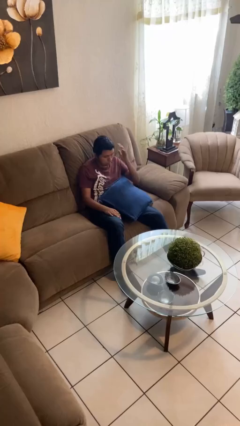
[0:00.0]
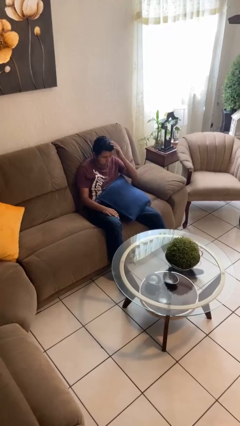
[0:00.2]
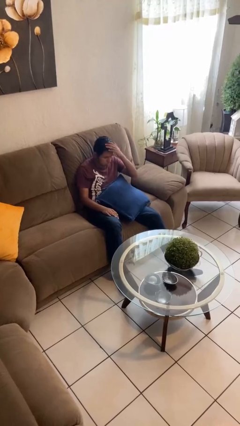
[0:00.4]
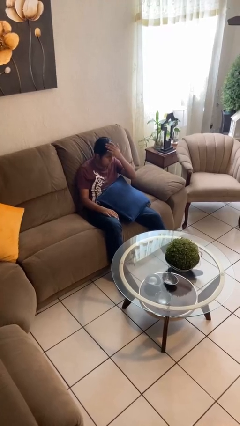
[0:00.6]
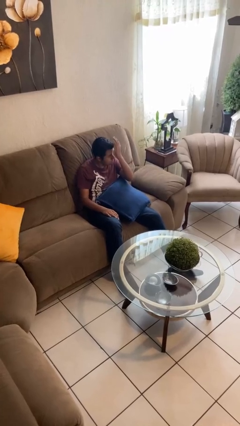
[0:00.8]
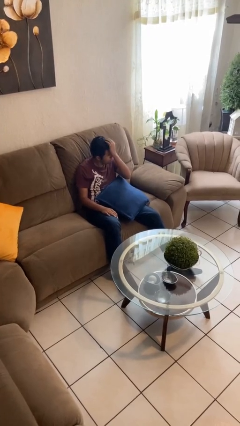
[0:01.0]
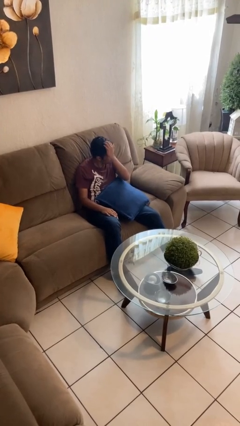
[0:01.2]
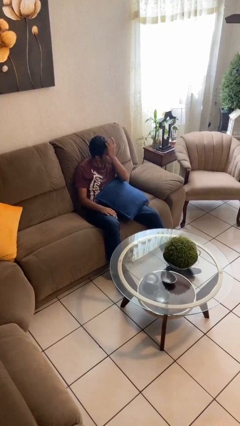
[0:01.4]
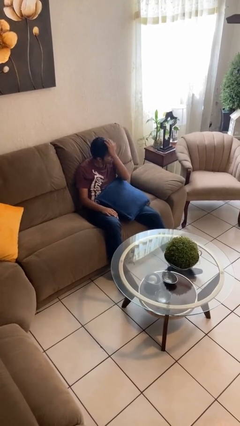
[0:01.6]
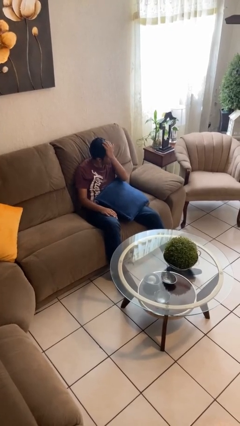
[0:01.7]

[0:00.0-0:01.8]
person strokes hair

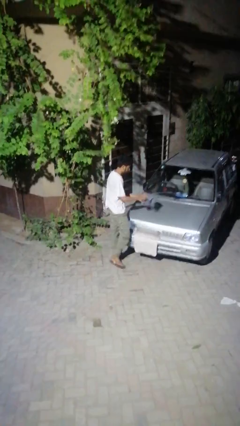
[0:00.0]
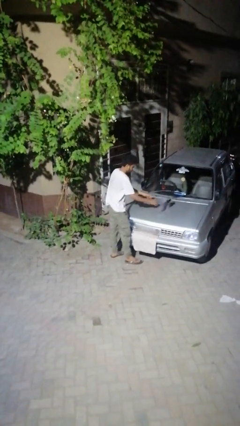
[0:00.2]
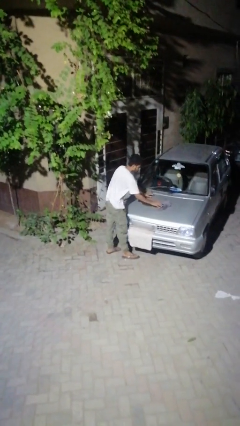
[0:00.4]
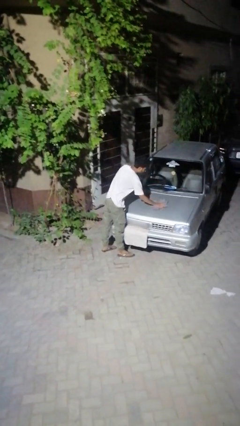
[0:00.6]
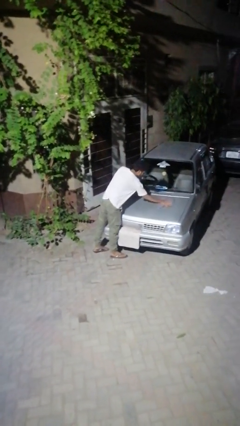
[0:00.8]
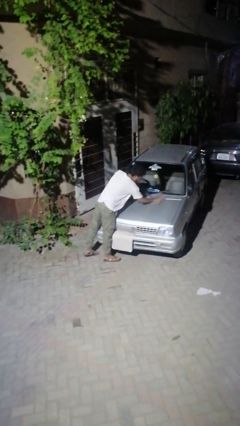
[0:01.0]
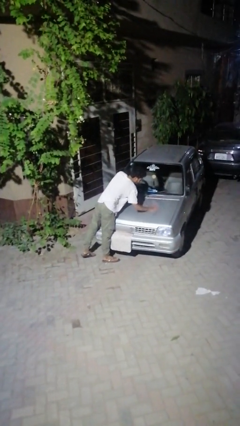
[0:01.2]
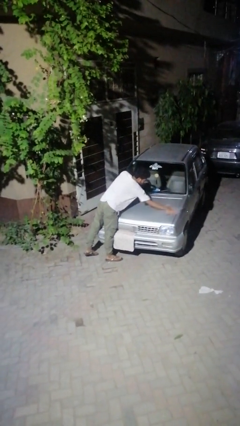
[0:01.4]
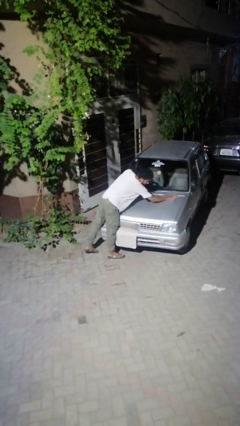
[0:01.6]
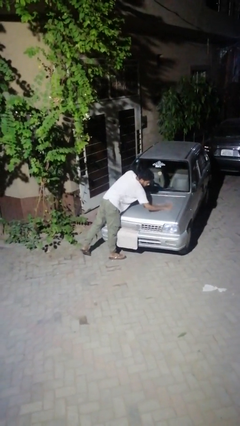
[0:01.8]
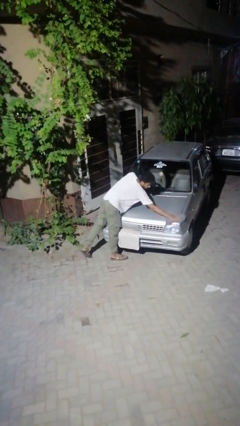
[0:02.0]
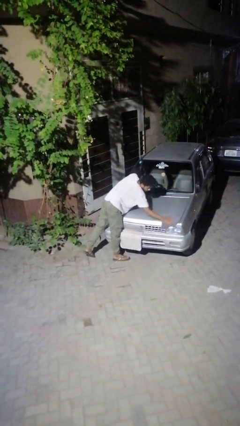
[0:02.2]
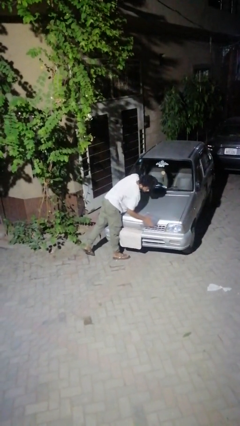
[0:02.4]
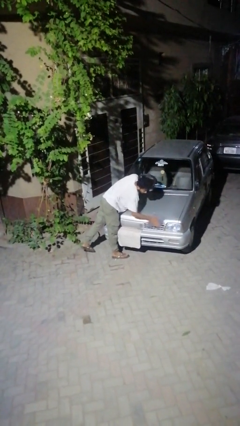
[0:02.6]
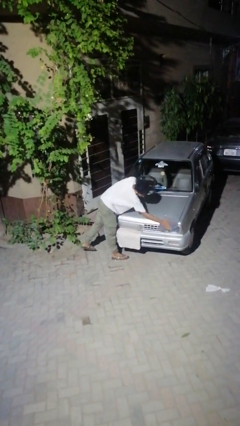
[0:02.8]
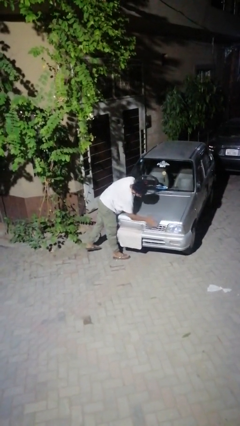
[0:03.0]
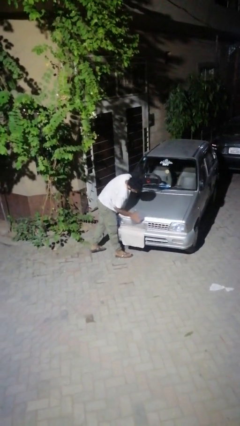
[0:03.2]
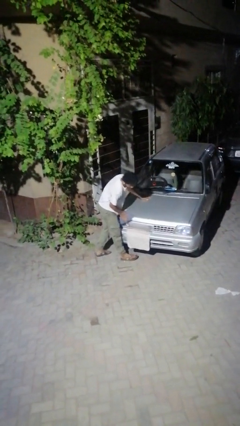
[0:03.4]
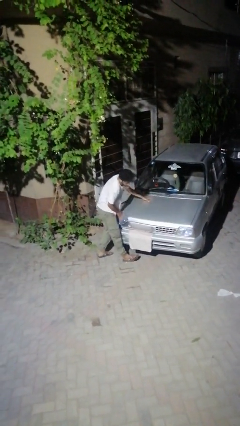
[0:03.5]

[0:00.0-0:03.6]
person polishes car with rag

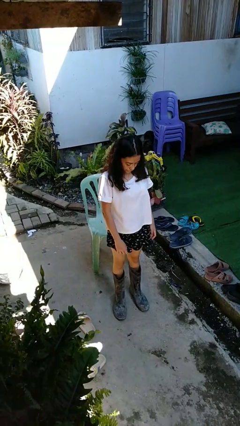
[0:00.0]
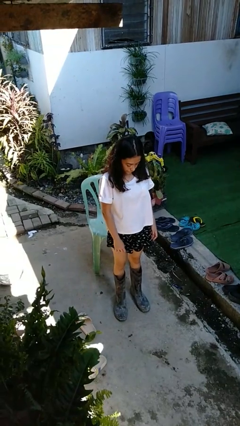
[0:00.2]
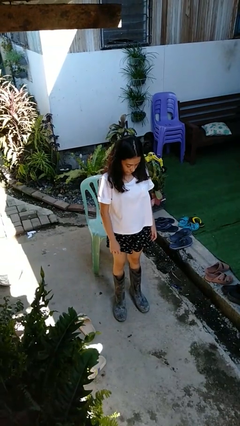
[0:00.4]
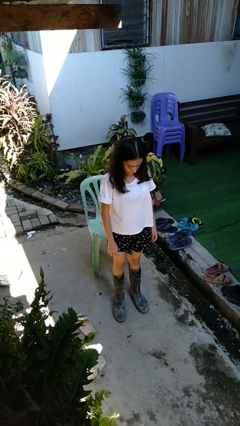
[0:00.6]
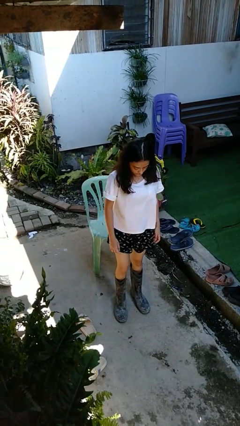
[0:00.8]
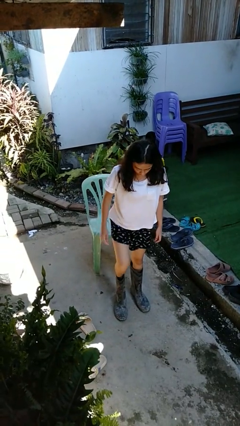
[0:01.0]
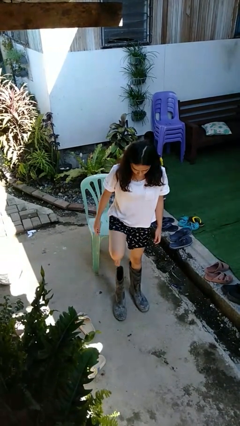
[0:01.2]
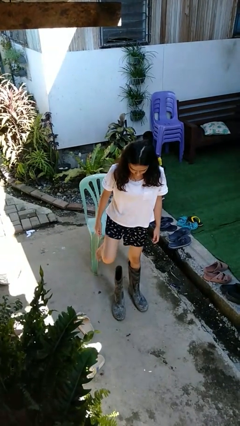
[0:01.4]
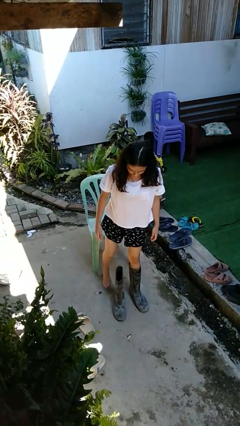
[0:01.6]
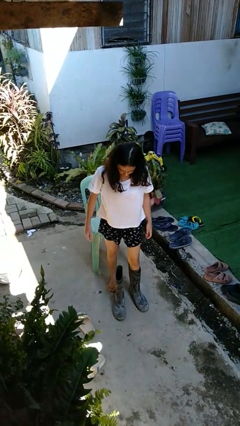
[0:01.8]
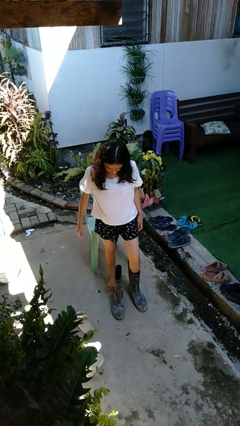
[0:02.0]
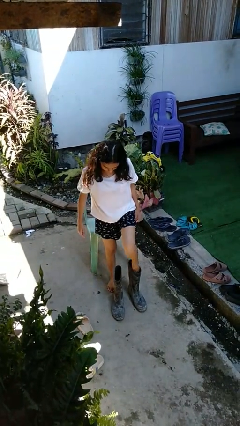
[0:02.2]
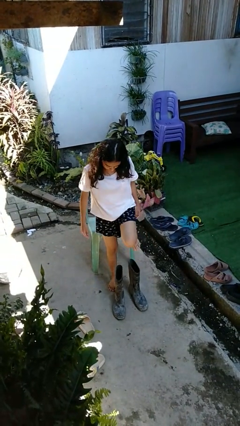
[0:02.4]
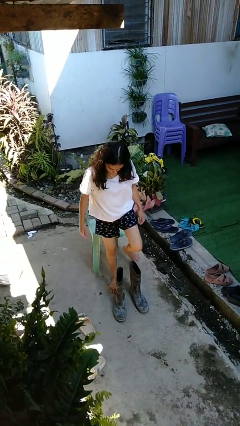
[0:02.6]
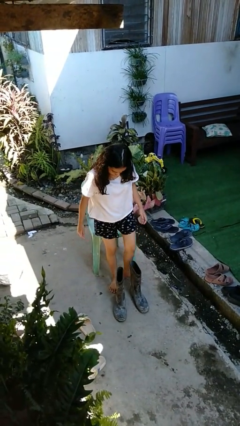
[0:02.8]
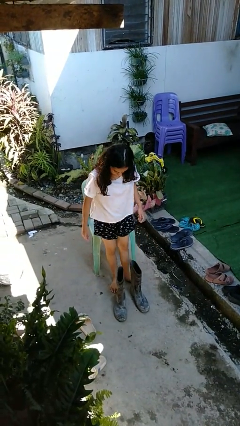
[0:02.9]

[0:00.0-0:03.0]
person takes off boots

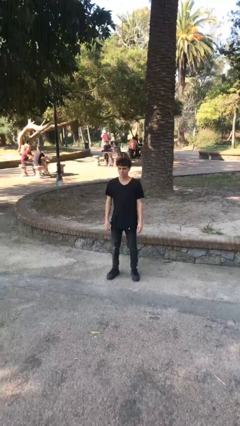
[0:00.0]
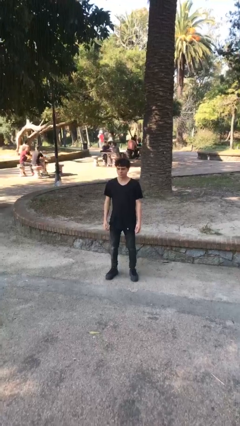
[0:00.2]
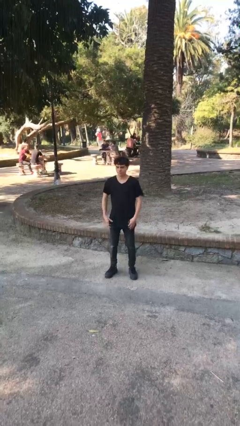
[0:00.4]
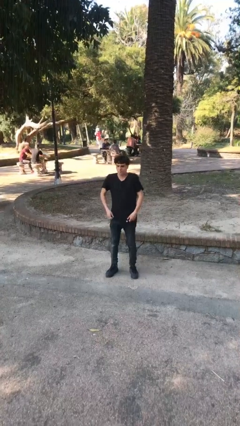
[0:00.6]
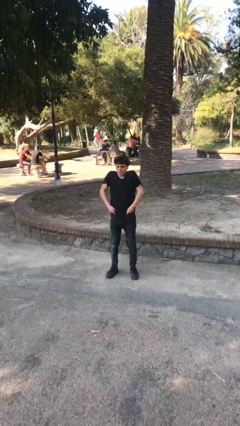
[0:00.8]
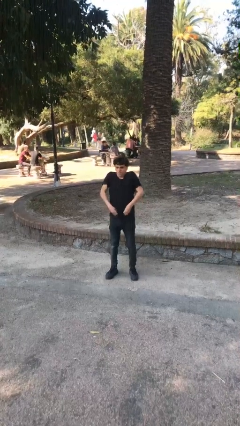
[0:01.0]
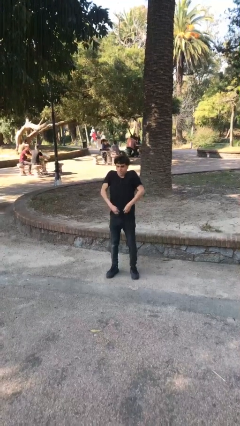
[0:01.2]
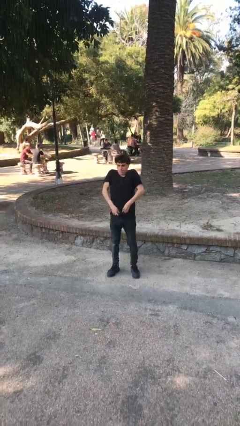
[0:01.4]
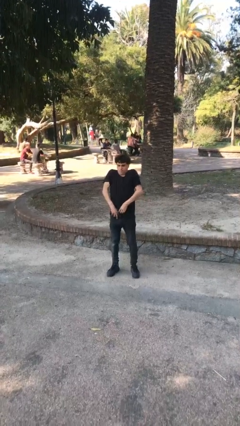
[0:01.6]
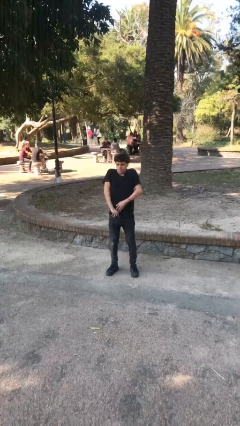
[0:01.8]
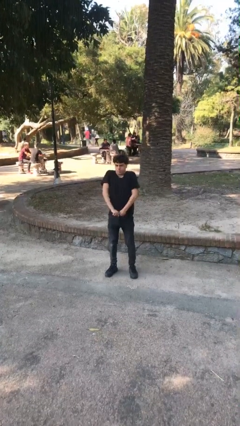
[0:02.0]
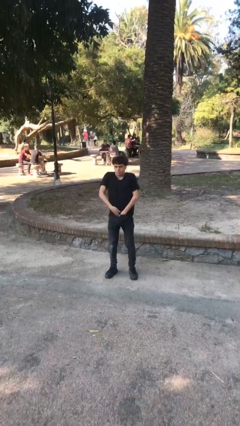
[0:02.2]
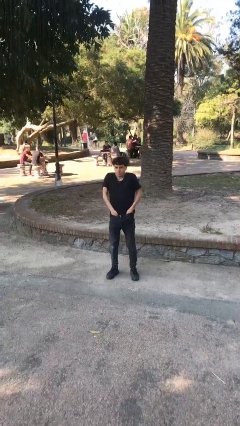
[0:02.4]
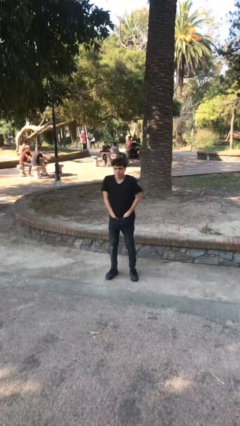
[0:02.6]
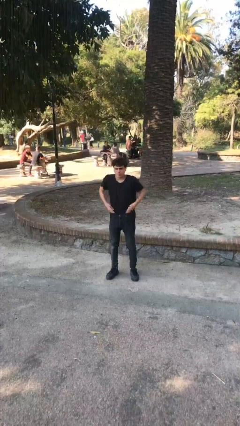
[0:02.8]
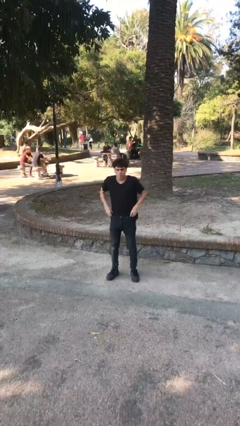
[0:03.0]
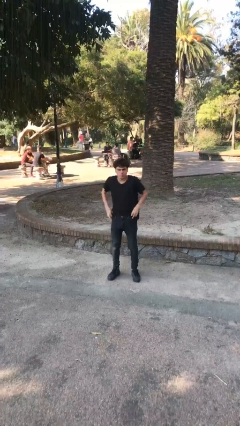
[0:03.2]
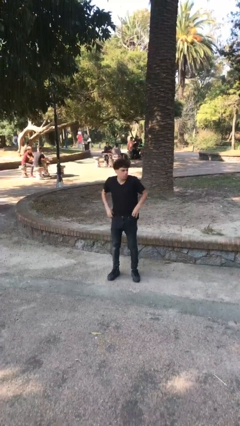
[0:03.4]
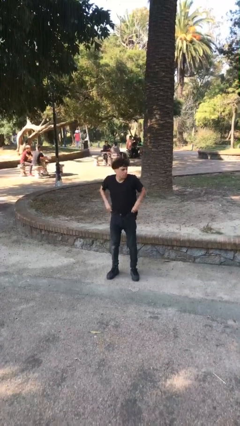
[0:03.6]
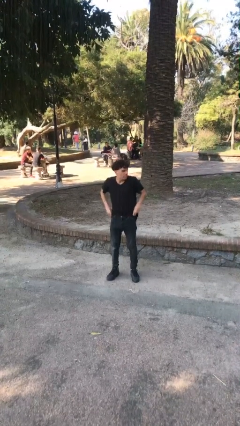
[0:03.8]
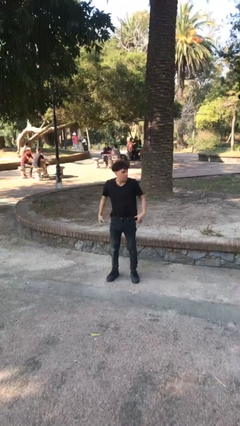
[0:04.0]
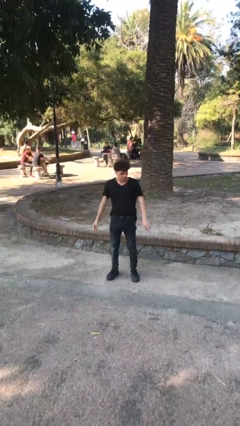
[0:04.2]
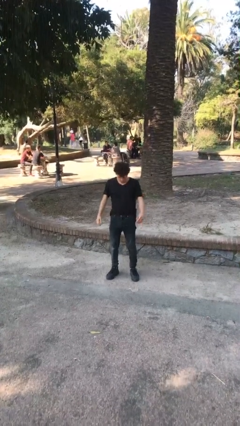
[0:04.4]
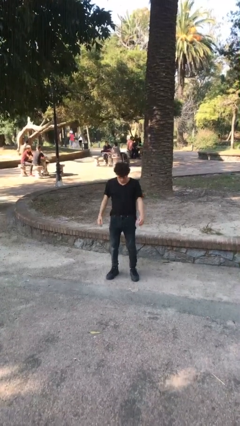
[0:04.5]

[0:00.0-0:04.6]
person tucks in shirt

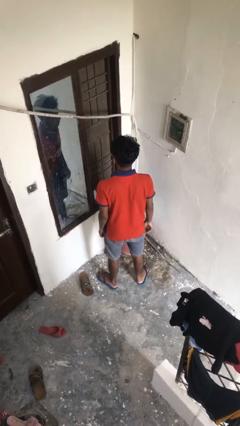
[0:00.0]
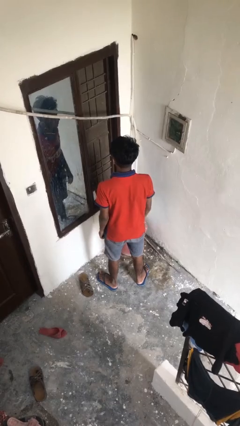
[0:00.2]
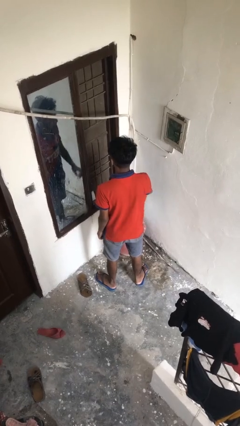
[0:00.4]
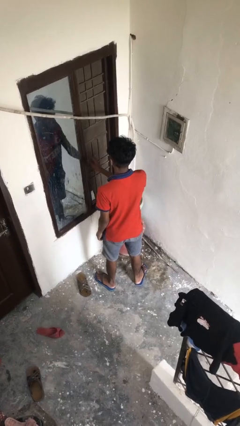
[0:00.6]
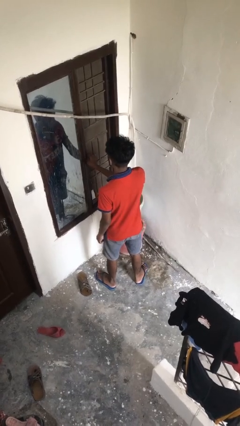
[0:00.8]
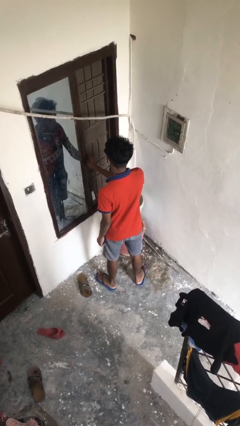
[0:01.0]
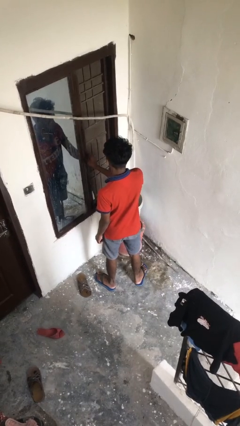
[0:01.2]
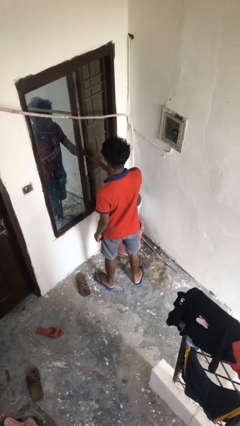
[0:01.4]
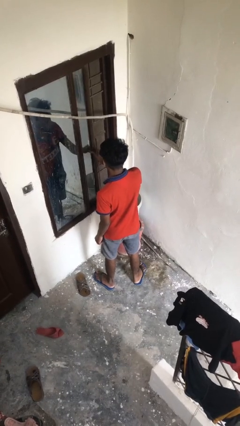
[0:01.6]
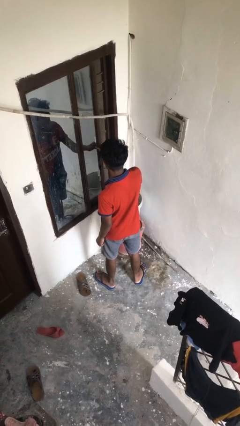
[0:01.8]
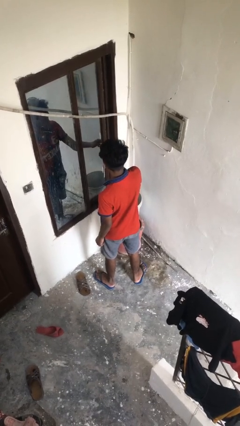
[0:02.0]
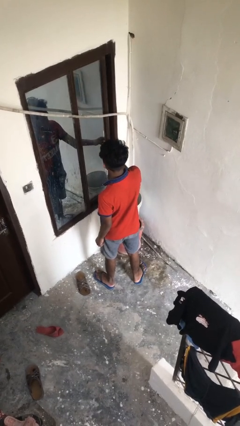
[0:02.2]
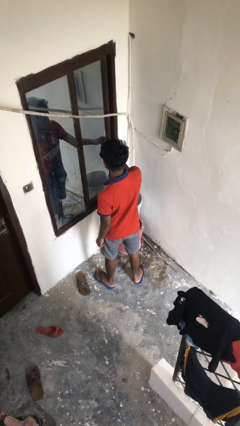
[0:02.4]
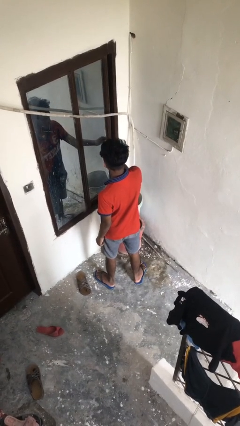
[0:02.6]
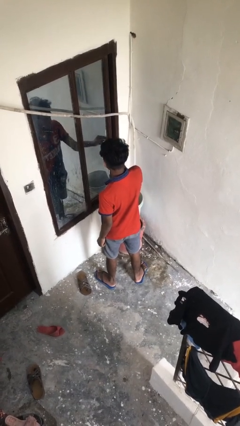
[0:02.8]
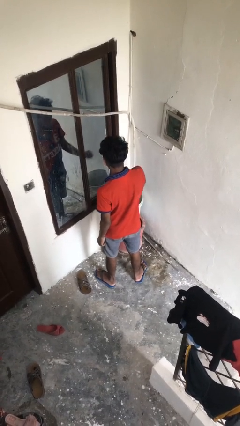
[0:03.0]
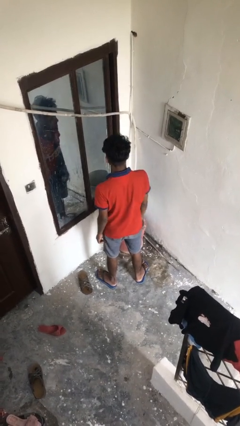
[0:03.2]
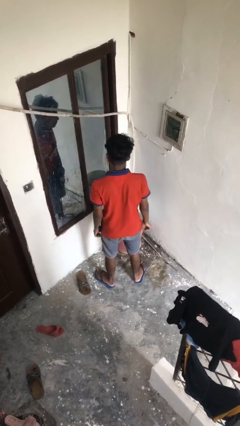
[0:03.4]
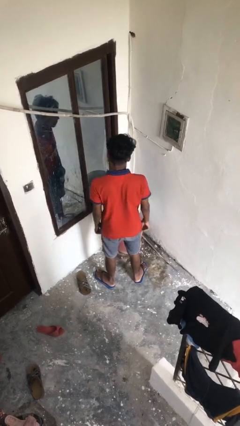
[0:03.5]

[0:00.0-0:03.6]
person closes home window

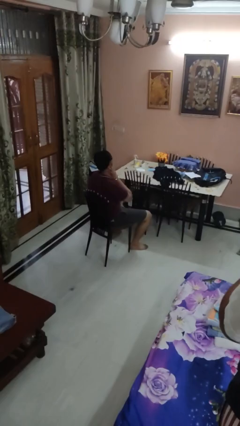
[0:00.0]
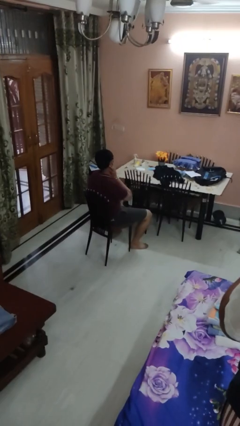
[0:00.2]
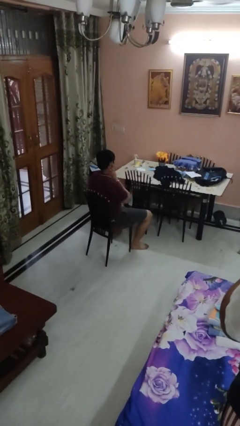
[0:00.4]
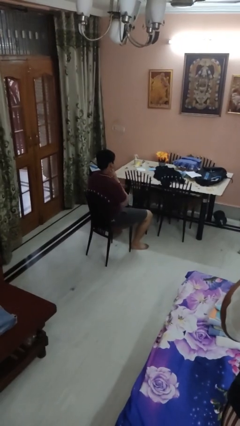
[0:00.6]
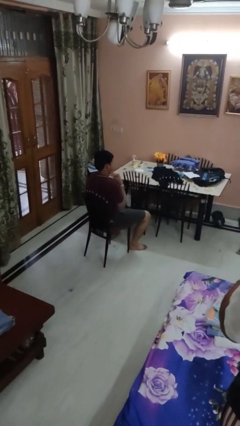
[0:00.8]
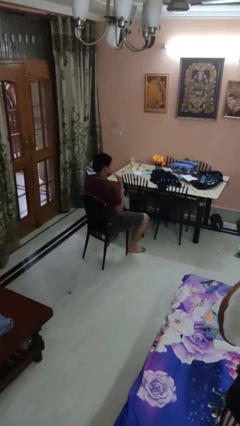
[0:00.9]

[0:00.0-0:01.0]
person swats bug

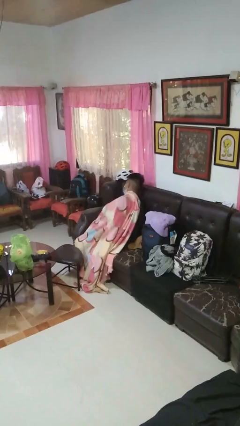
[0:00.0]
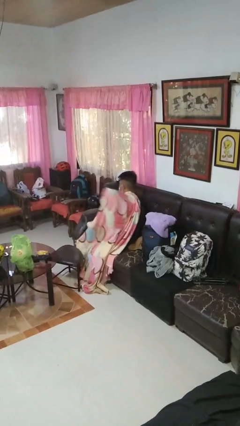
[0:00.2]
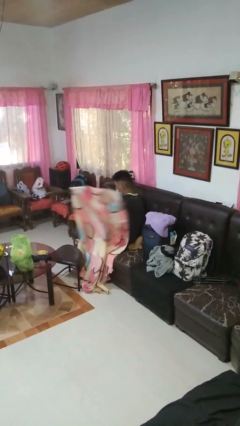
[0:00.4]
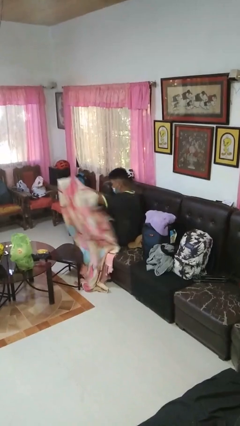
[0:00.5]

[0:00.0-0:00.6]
person uncovers with blanket
